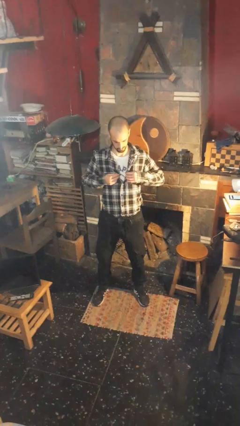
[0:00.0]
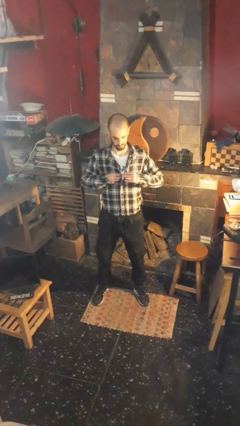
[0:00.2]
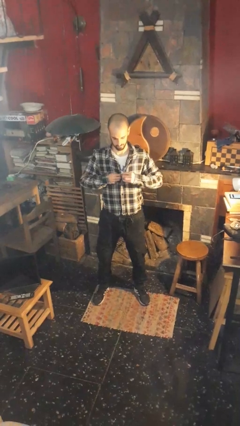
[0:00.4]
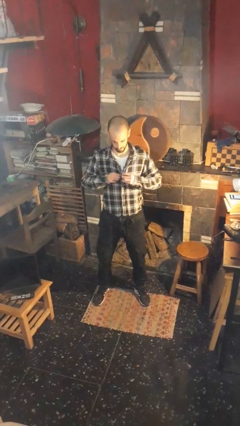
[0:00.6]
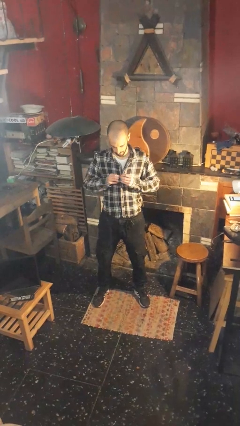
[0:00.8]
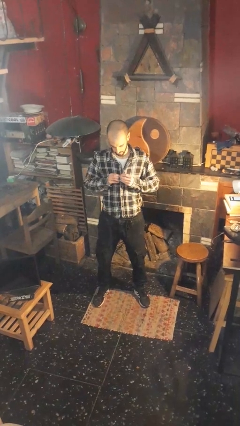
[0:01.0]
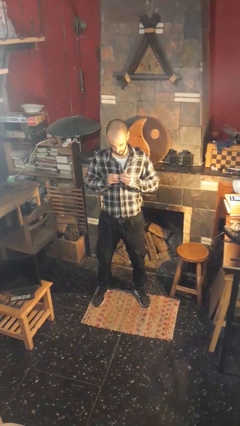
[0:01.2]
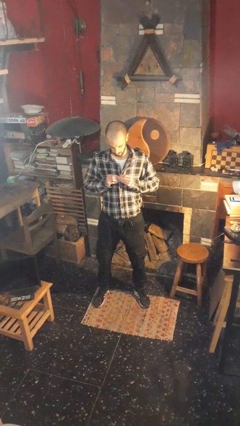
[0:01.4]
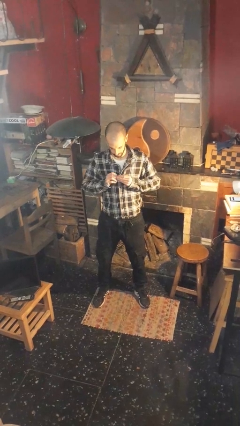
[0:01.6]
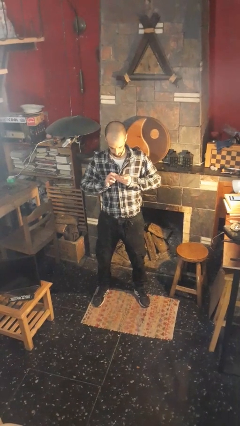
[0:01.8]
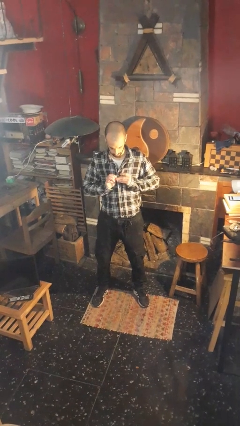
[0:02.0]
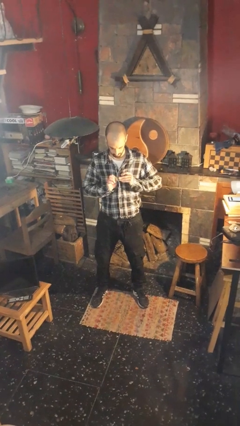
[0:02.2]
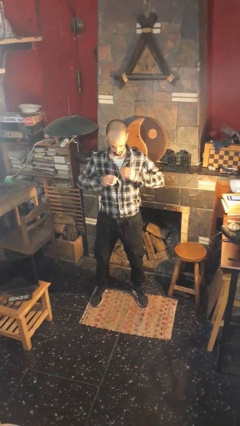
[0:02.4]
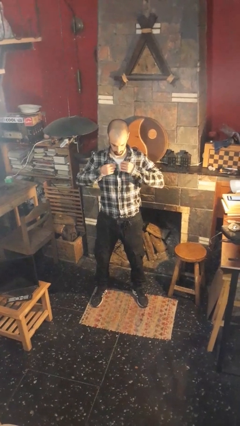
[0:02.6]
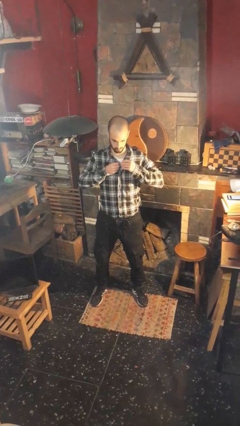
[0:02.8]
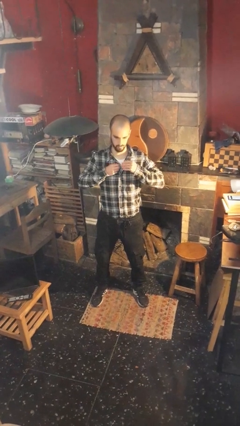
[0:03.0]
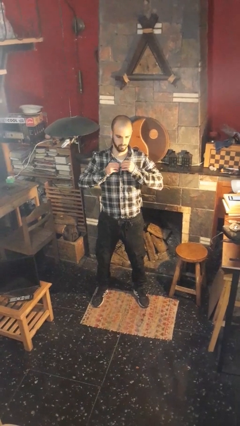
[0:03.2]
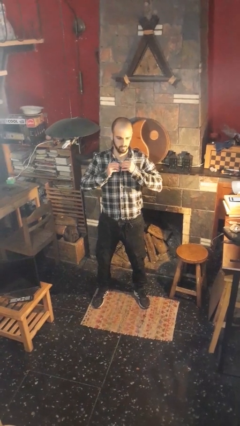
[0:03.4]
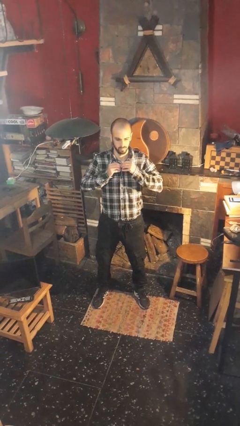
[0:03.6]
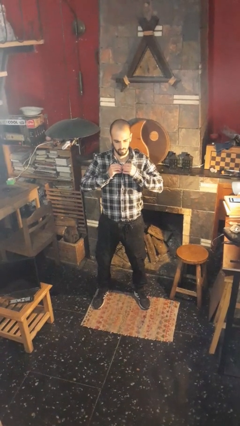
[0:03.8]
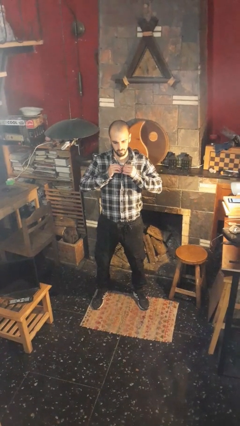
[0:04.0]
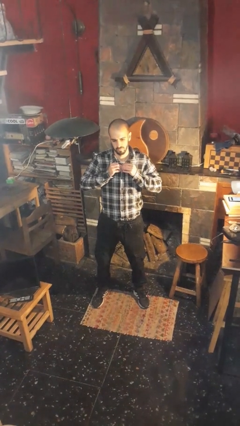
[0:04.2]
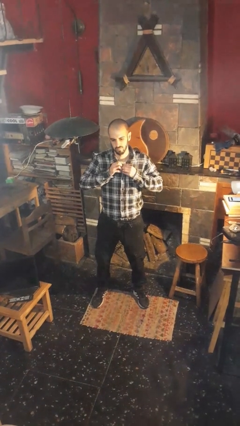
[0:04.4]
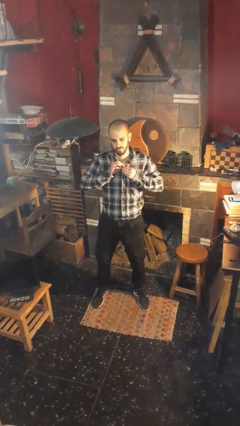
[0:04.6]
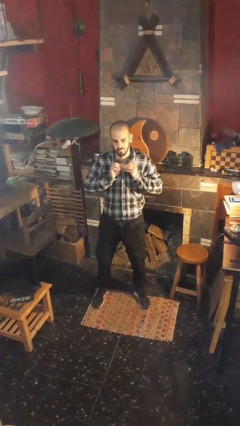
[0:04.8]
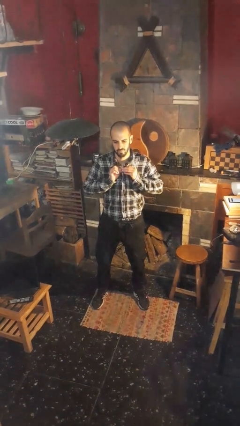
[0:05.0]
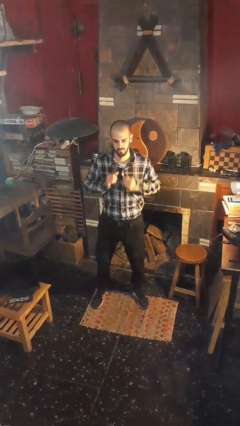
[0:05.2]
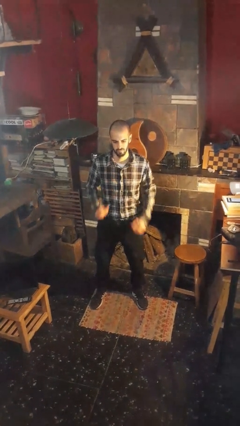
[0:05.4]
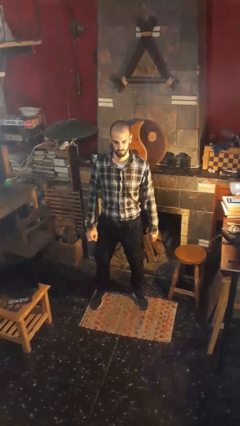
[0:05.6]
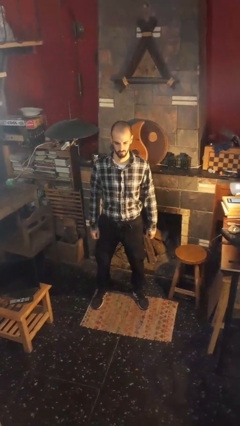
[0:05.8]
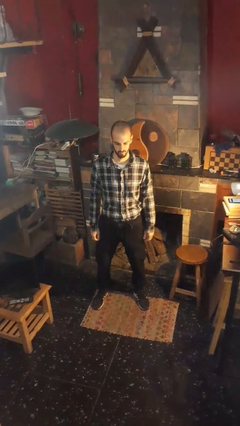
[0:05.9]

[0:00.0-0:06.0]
person buttons shirt

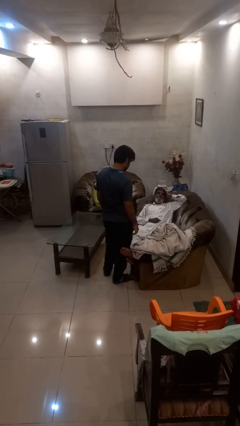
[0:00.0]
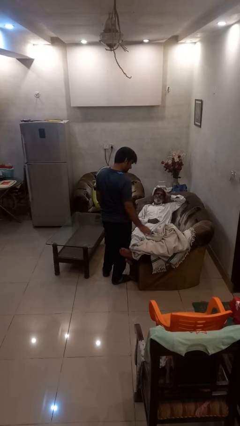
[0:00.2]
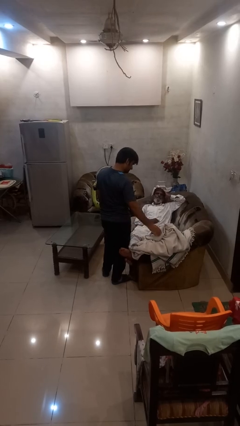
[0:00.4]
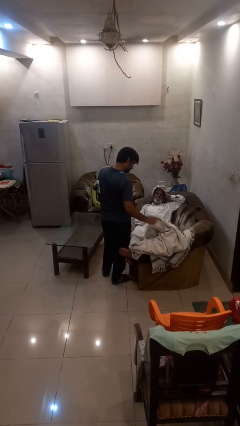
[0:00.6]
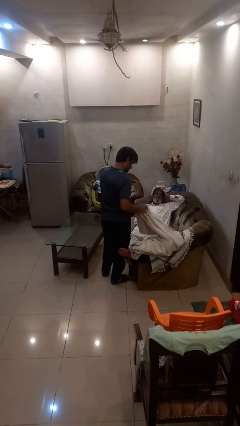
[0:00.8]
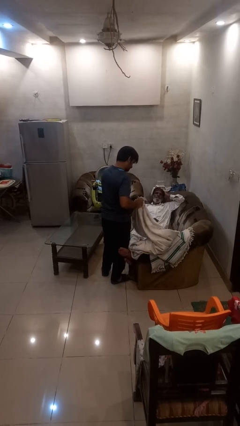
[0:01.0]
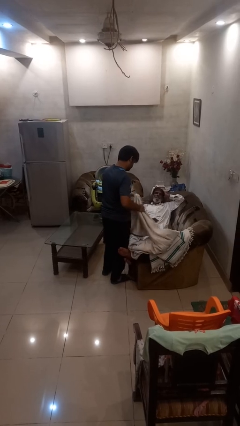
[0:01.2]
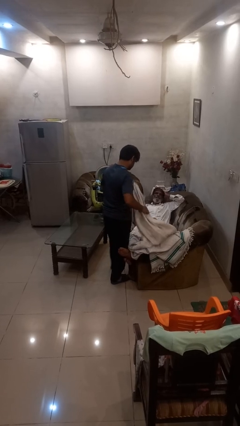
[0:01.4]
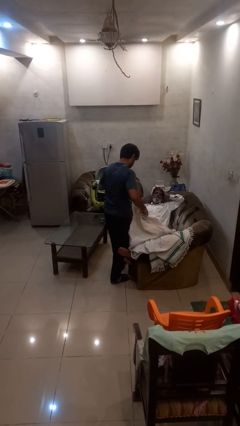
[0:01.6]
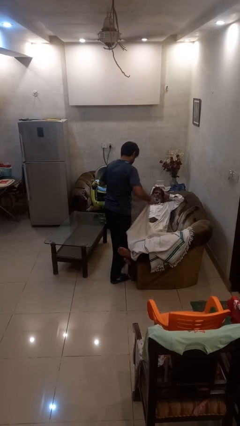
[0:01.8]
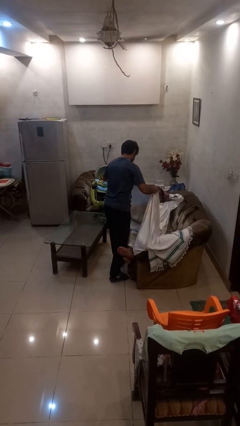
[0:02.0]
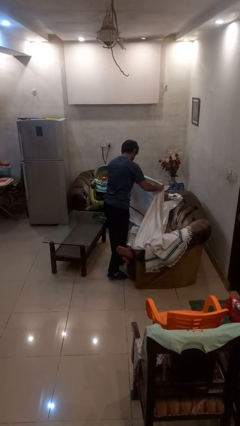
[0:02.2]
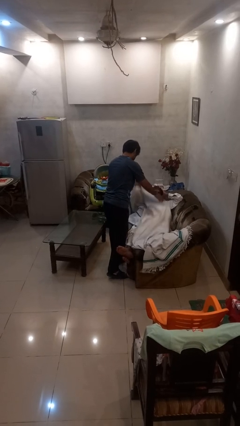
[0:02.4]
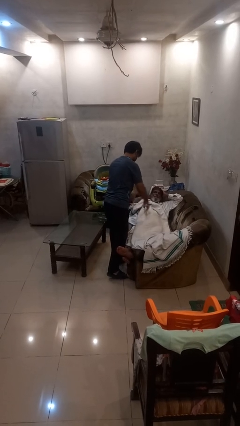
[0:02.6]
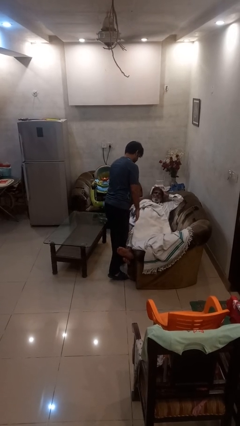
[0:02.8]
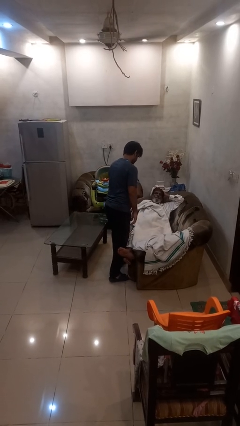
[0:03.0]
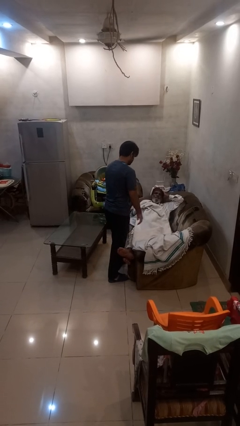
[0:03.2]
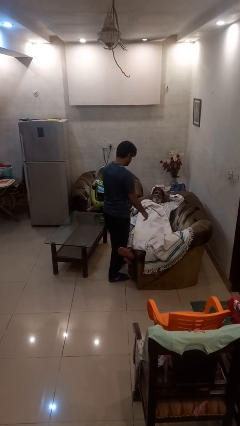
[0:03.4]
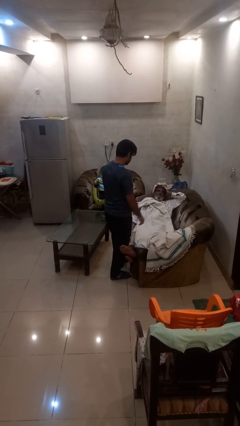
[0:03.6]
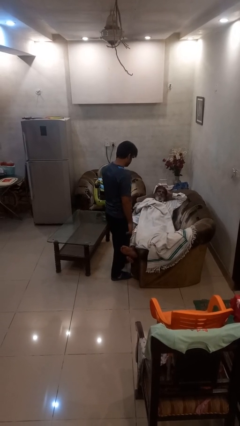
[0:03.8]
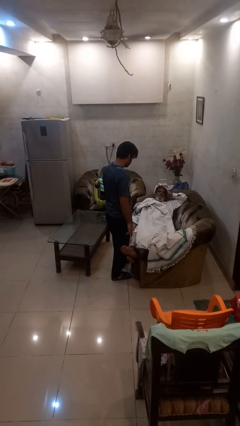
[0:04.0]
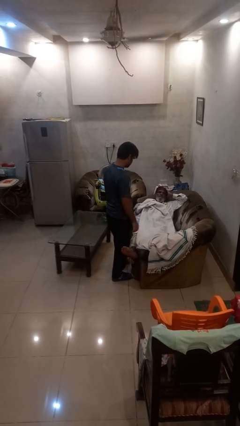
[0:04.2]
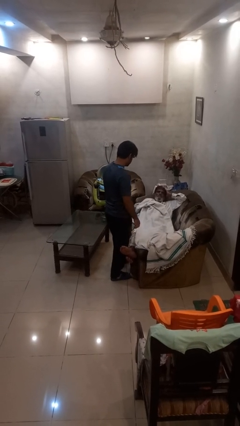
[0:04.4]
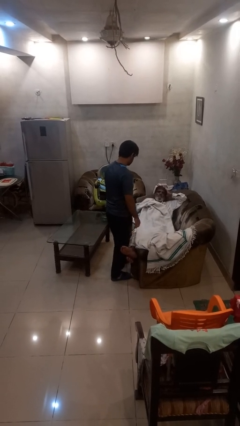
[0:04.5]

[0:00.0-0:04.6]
person covers friend with blanket

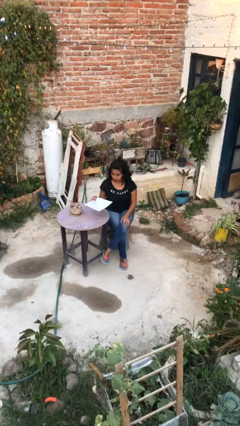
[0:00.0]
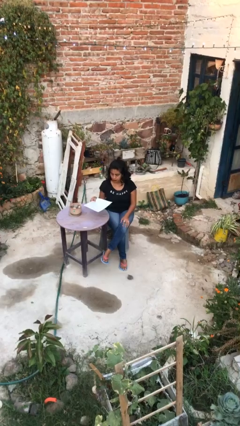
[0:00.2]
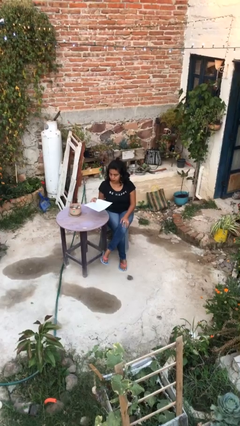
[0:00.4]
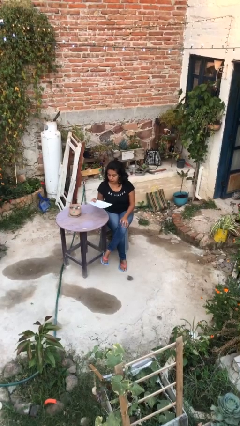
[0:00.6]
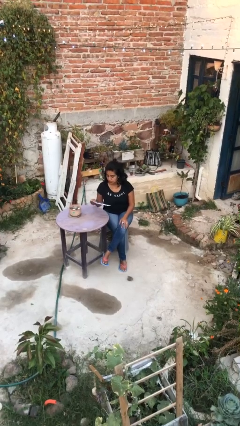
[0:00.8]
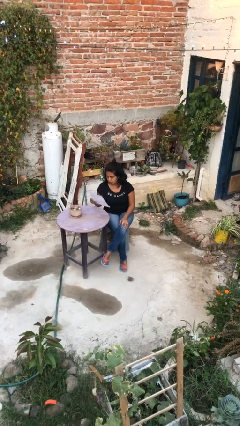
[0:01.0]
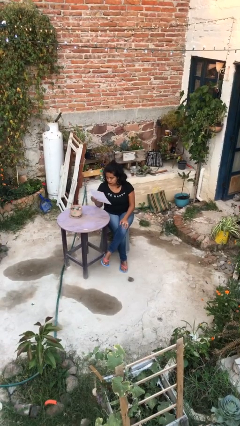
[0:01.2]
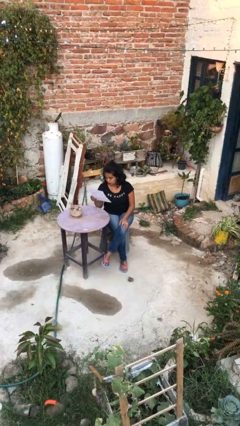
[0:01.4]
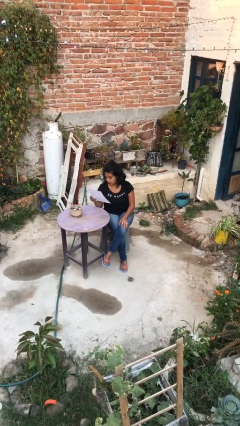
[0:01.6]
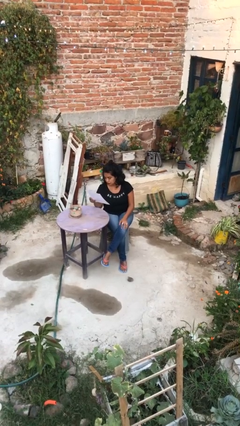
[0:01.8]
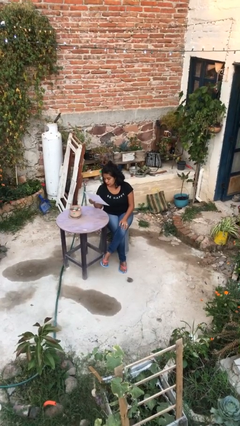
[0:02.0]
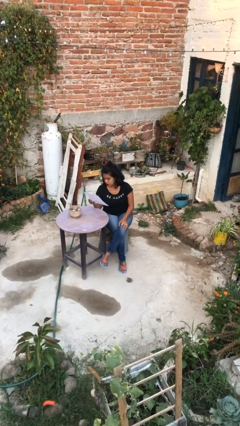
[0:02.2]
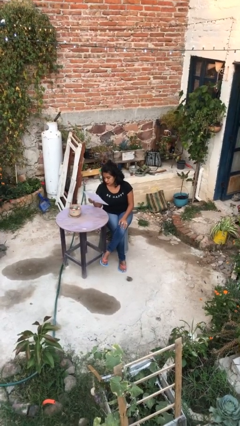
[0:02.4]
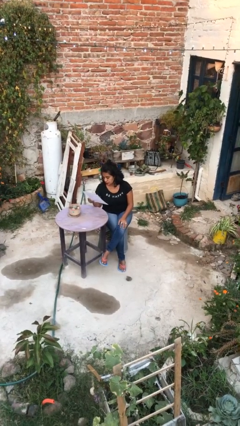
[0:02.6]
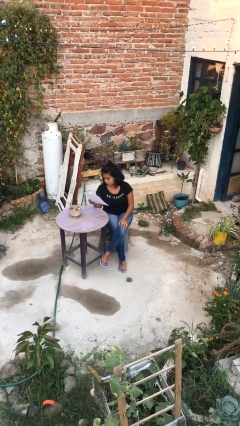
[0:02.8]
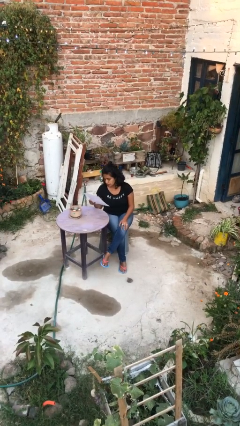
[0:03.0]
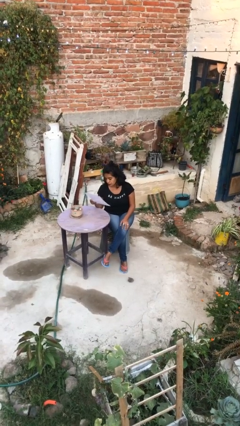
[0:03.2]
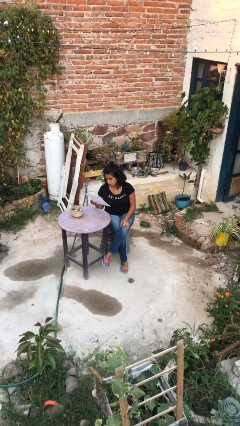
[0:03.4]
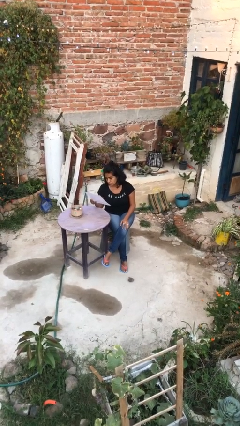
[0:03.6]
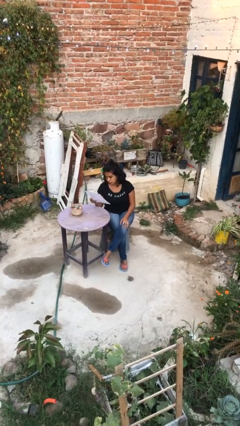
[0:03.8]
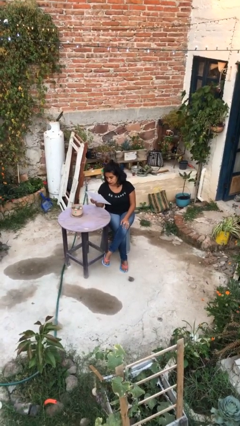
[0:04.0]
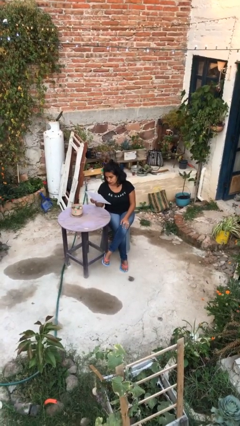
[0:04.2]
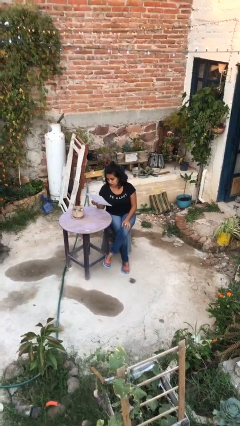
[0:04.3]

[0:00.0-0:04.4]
person reads document

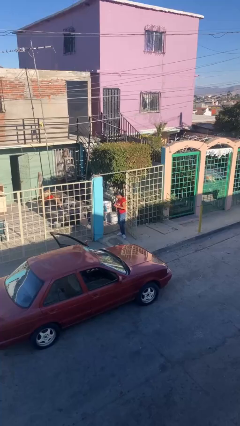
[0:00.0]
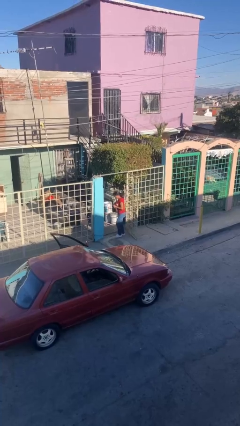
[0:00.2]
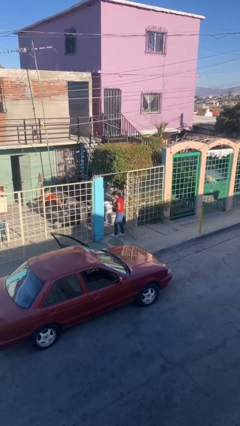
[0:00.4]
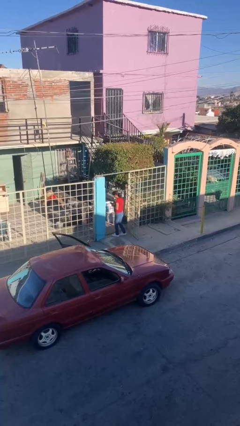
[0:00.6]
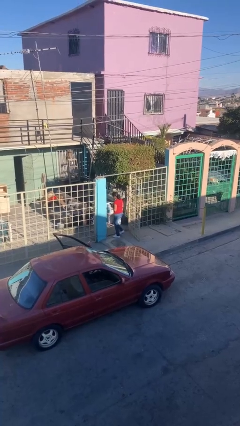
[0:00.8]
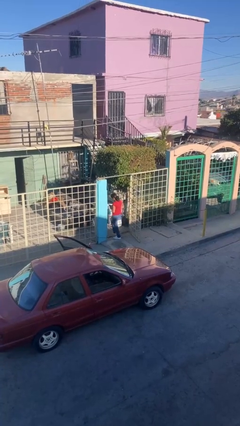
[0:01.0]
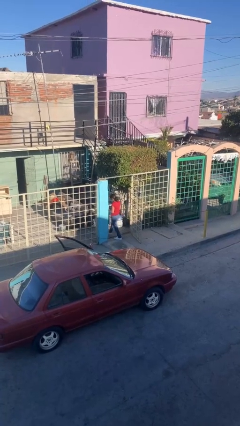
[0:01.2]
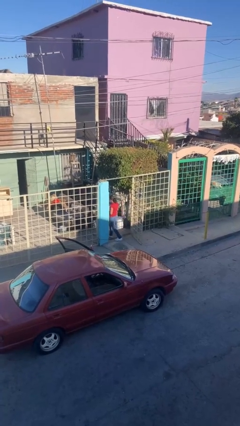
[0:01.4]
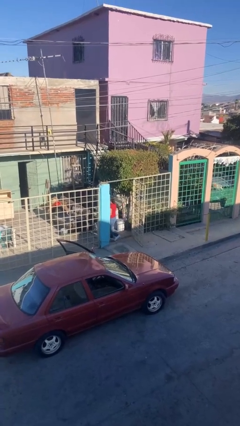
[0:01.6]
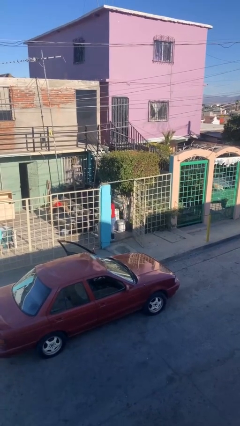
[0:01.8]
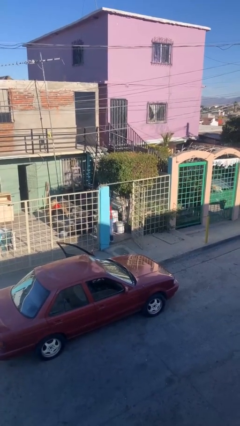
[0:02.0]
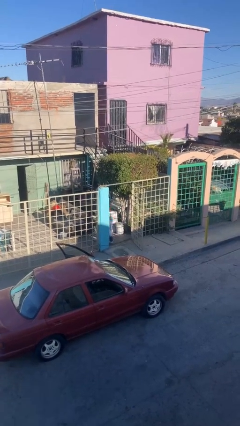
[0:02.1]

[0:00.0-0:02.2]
person exits scene through structure

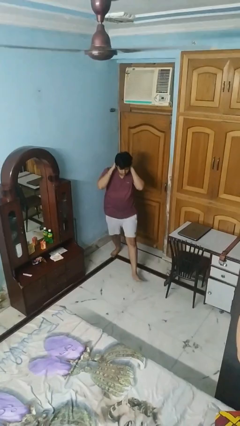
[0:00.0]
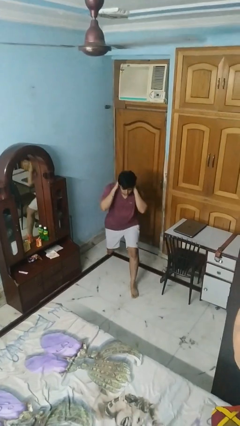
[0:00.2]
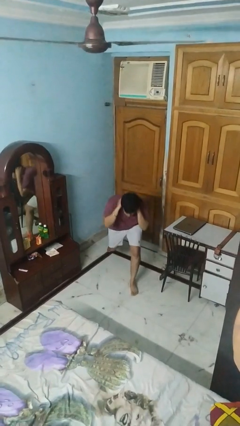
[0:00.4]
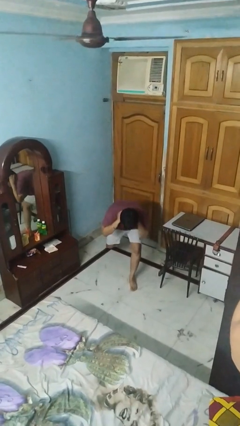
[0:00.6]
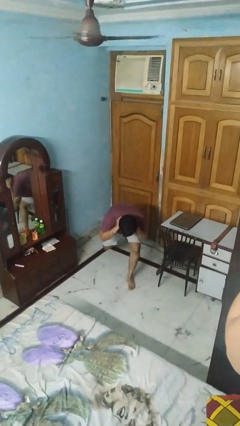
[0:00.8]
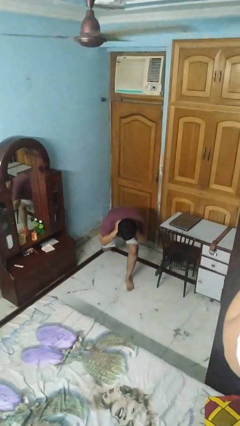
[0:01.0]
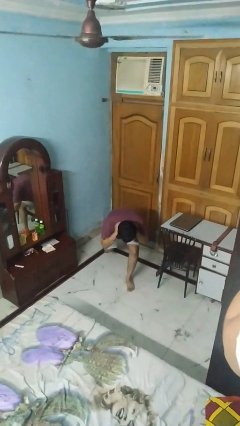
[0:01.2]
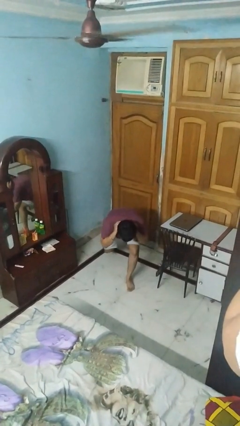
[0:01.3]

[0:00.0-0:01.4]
person exercises with lunges
